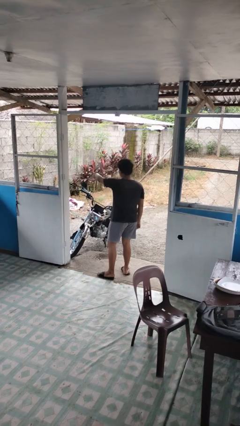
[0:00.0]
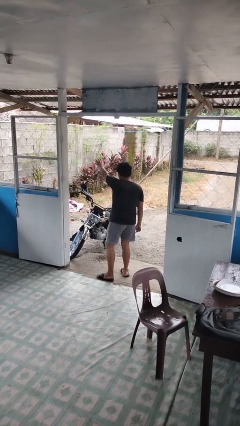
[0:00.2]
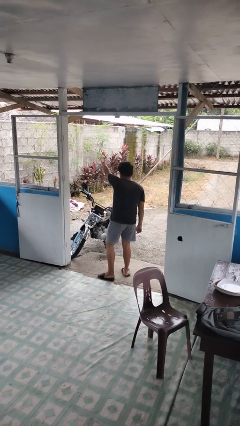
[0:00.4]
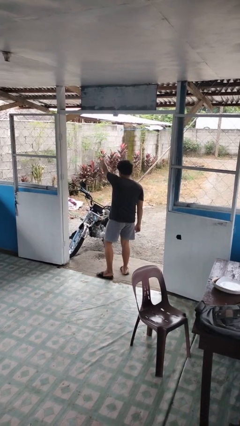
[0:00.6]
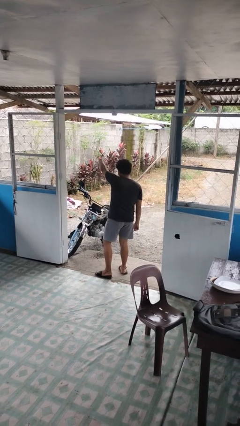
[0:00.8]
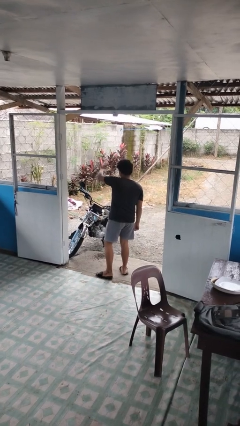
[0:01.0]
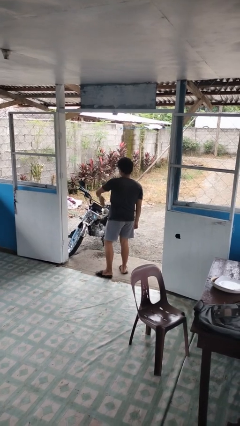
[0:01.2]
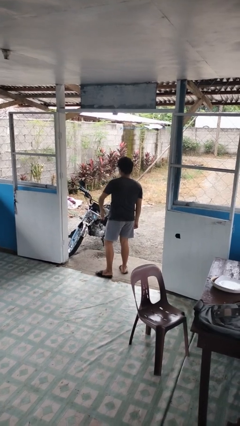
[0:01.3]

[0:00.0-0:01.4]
person gestures come here

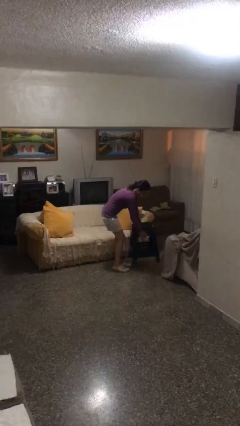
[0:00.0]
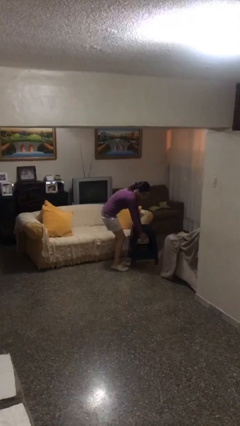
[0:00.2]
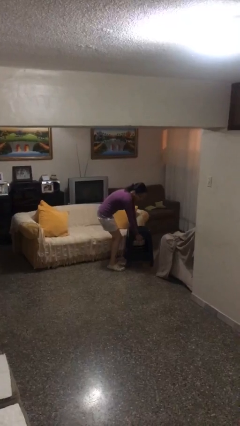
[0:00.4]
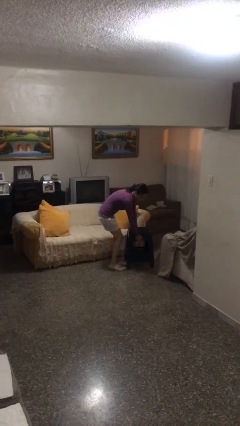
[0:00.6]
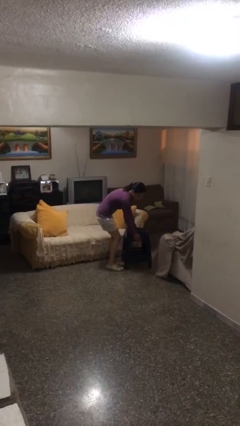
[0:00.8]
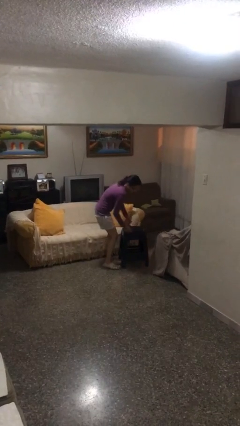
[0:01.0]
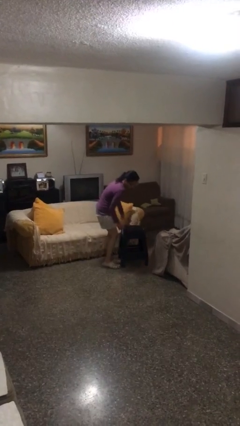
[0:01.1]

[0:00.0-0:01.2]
person puts down object on floor

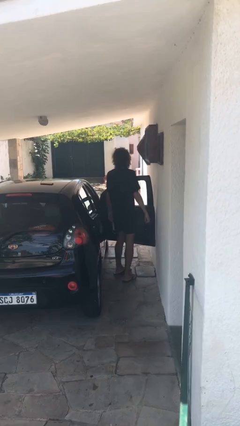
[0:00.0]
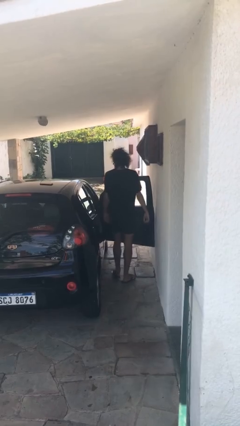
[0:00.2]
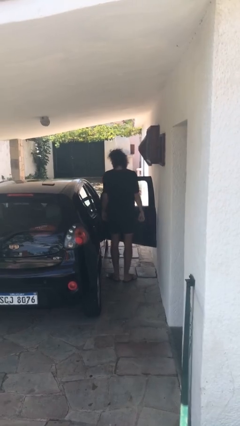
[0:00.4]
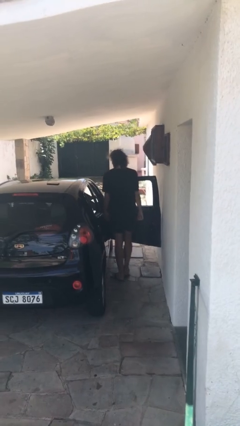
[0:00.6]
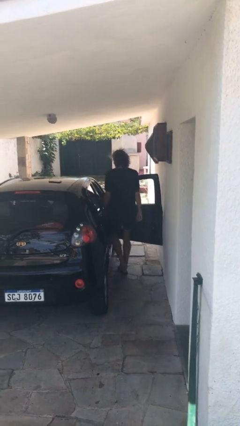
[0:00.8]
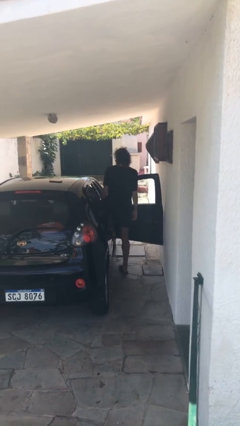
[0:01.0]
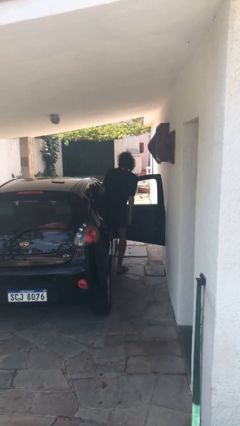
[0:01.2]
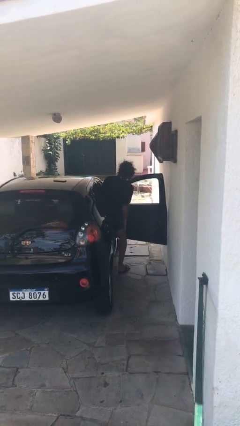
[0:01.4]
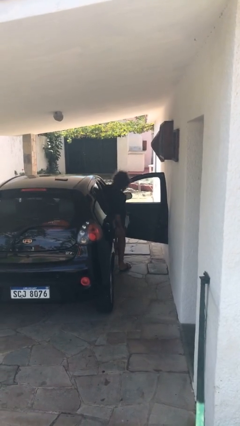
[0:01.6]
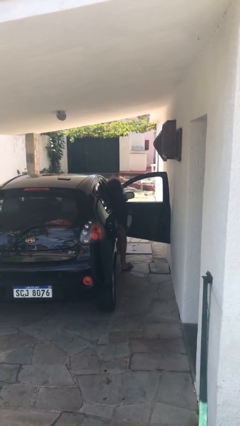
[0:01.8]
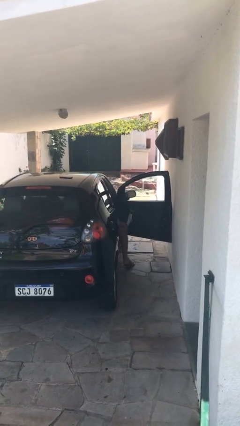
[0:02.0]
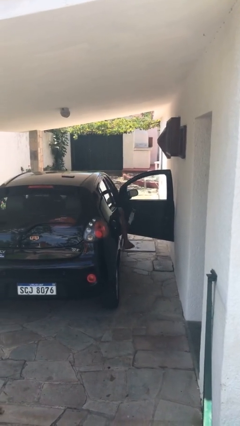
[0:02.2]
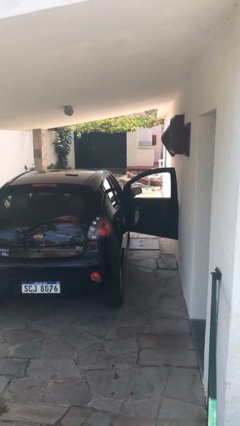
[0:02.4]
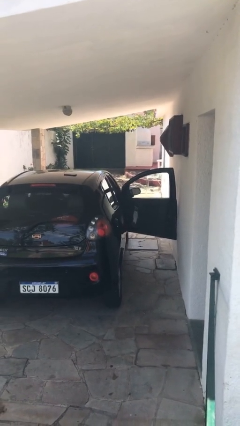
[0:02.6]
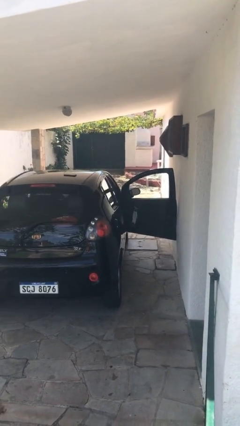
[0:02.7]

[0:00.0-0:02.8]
person enters car

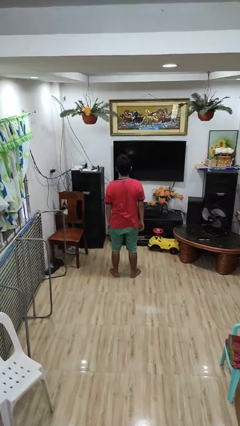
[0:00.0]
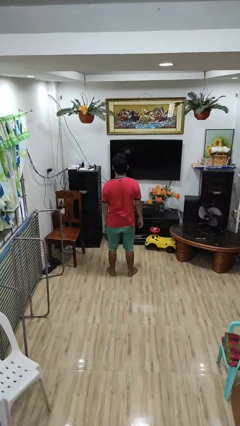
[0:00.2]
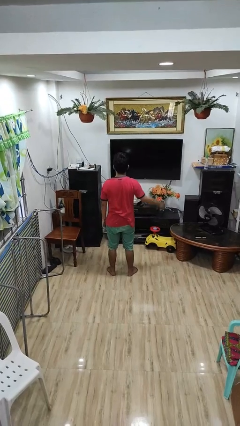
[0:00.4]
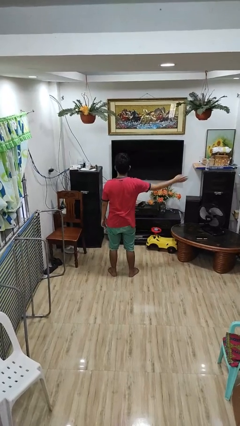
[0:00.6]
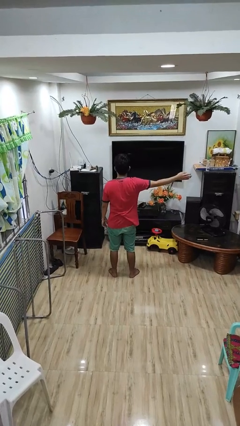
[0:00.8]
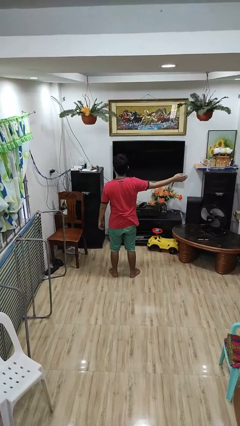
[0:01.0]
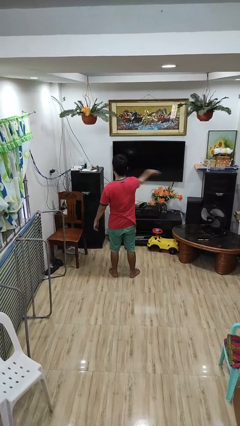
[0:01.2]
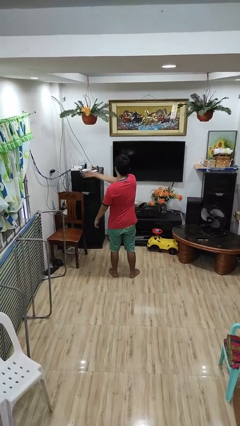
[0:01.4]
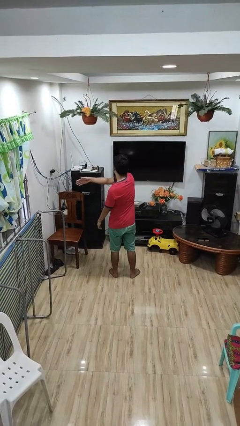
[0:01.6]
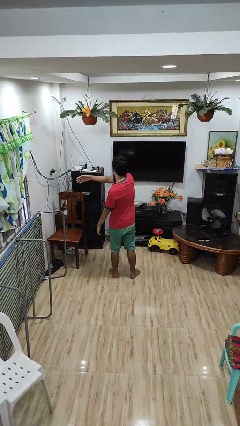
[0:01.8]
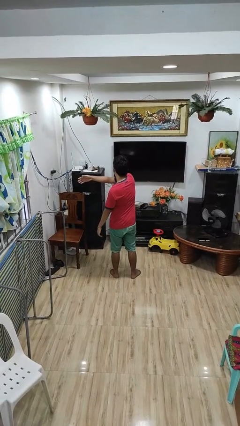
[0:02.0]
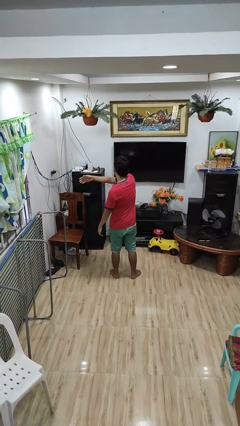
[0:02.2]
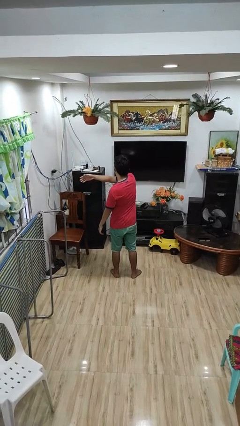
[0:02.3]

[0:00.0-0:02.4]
person gestures swipe left

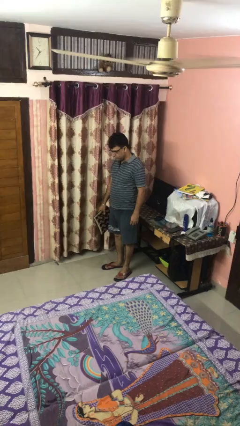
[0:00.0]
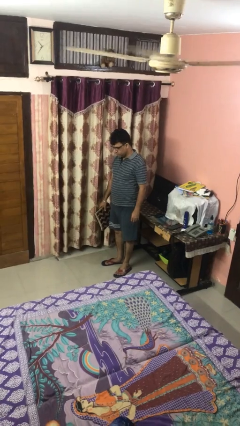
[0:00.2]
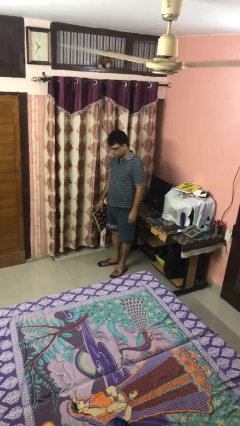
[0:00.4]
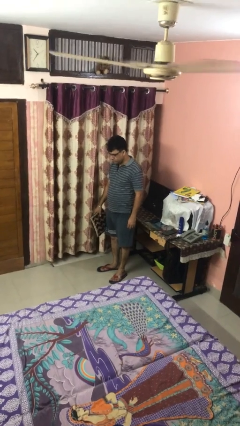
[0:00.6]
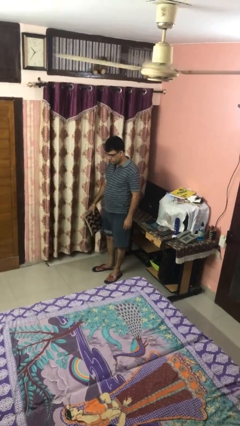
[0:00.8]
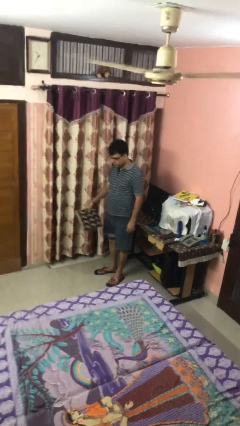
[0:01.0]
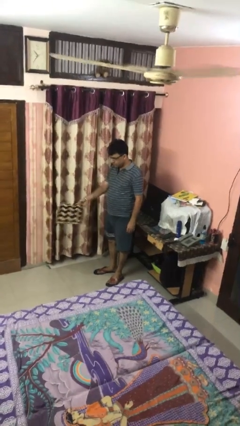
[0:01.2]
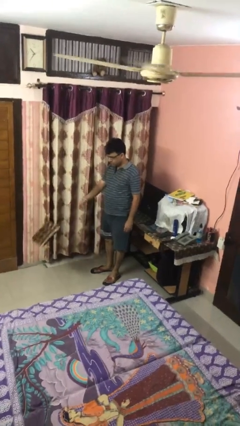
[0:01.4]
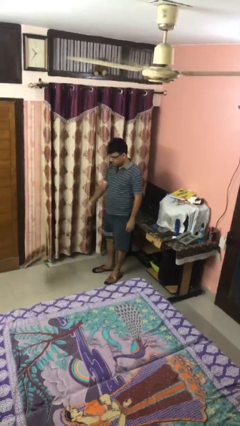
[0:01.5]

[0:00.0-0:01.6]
person throws object to ground

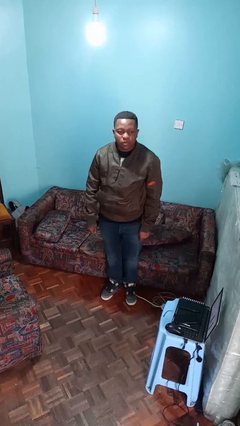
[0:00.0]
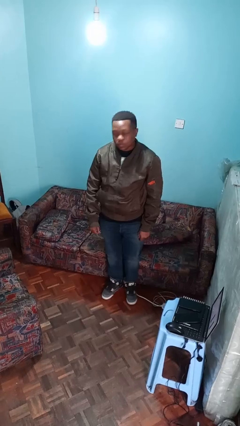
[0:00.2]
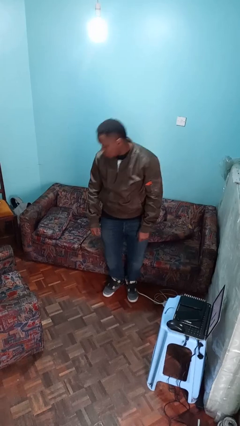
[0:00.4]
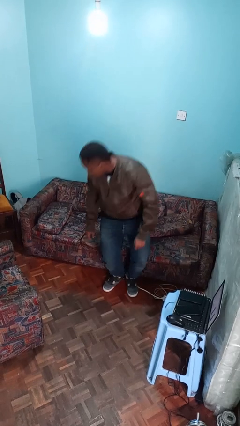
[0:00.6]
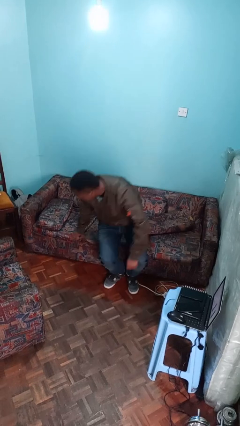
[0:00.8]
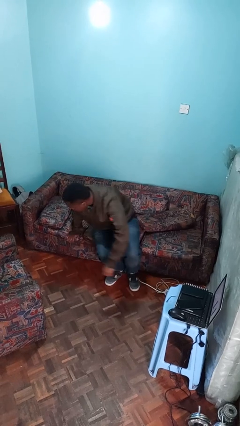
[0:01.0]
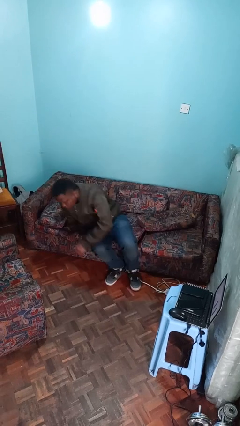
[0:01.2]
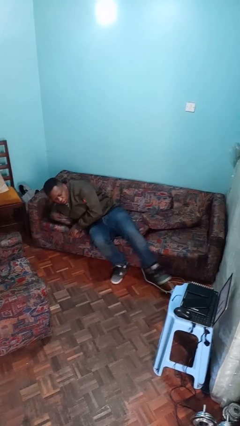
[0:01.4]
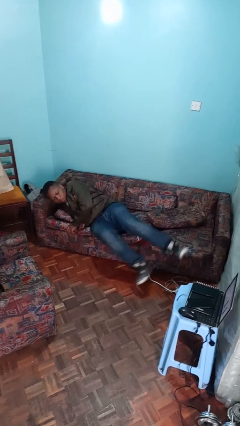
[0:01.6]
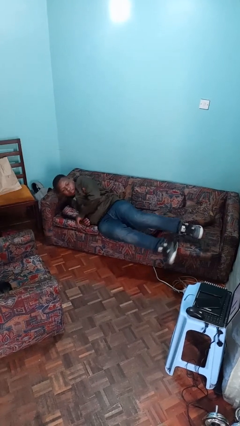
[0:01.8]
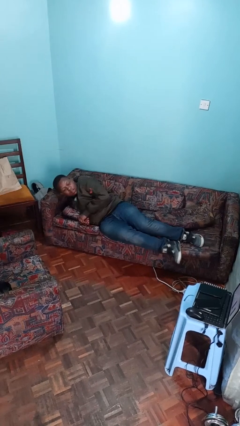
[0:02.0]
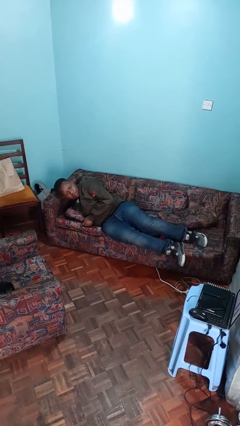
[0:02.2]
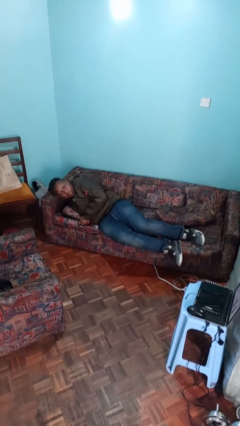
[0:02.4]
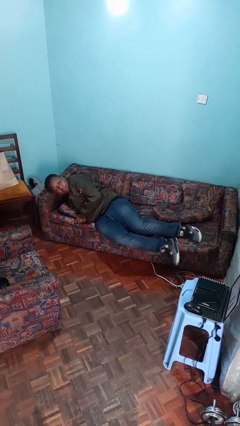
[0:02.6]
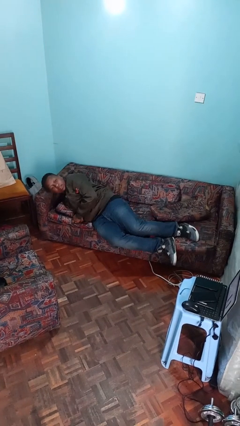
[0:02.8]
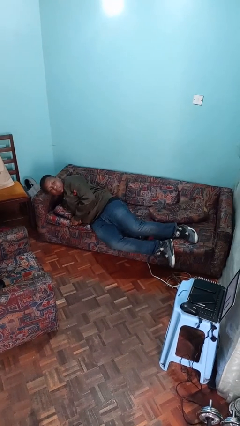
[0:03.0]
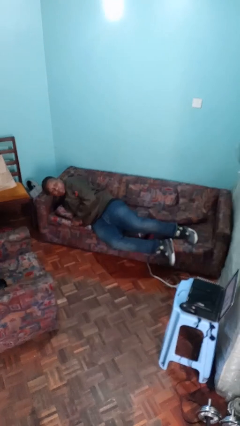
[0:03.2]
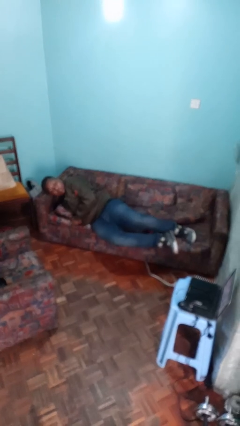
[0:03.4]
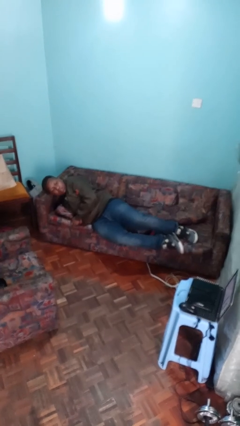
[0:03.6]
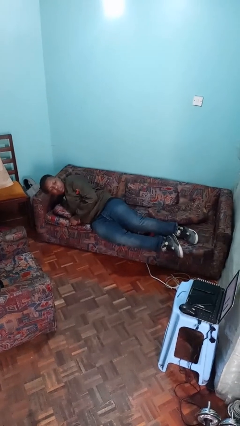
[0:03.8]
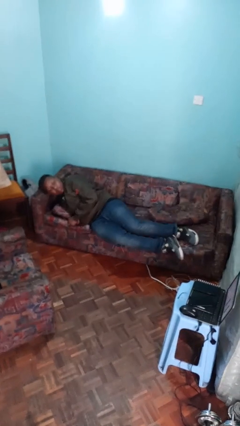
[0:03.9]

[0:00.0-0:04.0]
person lies down on couch

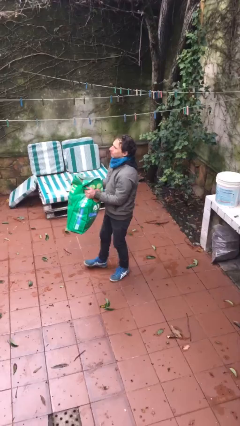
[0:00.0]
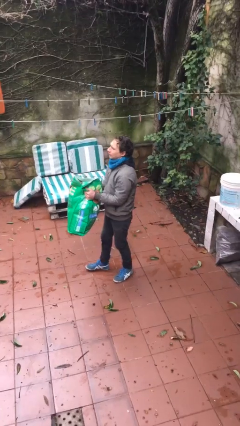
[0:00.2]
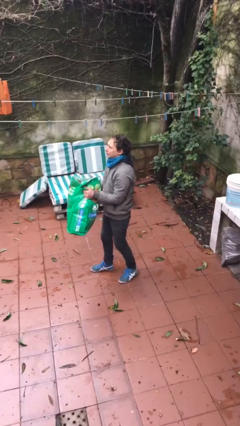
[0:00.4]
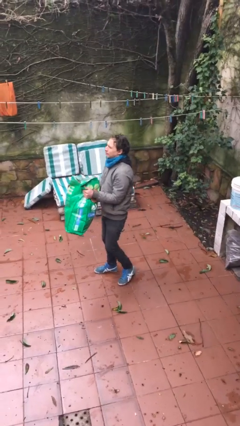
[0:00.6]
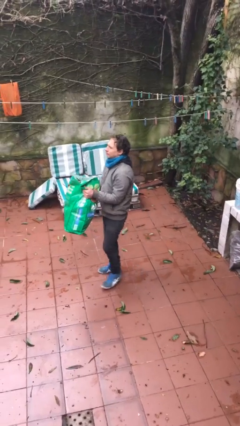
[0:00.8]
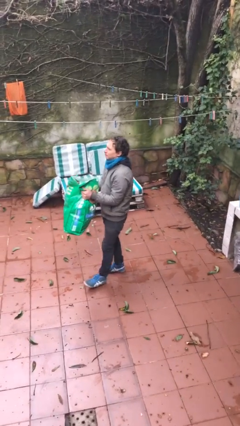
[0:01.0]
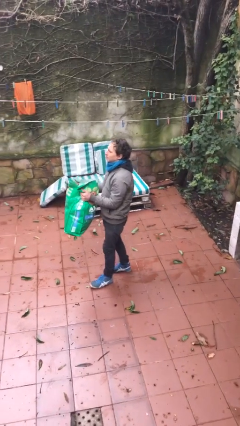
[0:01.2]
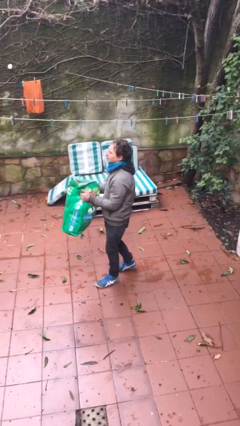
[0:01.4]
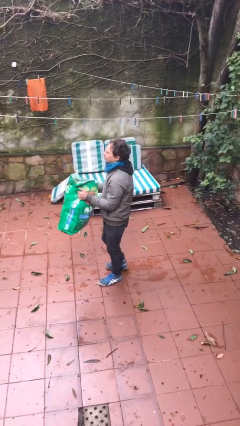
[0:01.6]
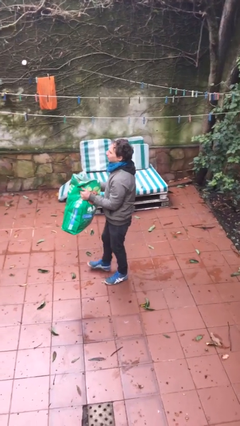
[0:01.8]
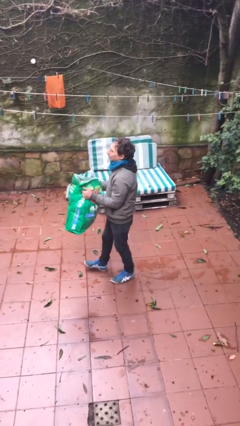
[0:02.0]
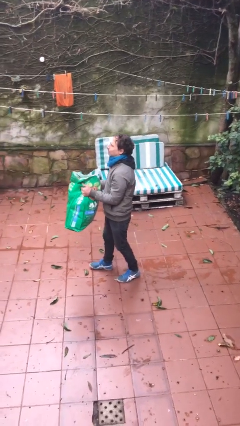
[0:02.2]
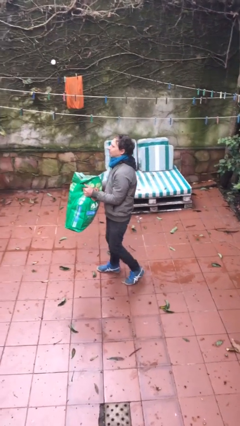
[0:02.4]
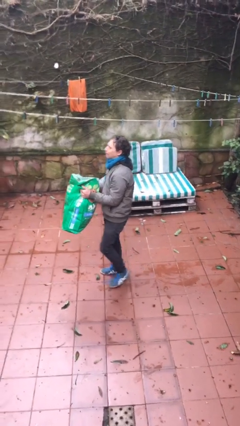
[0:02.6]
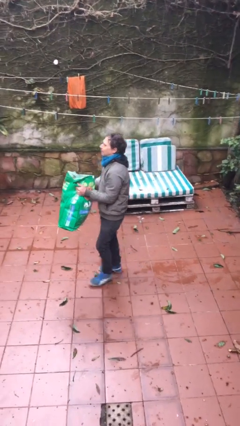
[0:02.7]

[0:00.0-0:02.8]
person carries heavy object

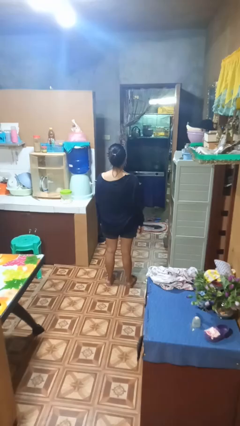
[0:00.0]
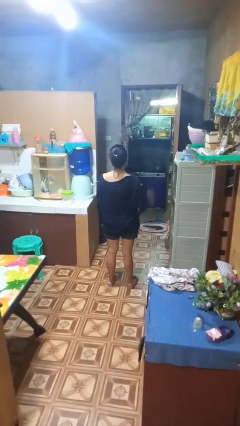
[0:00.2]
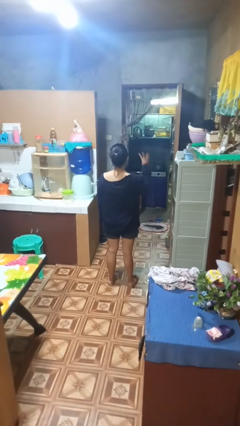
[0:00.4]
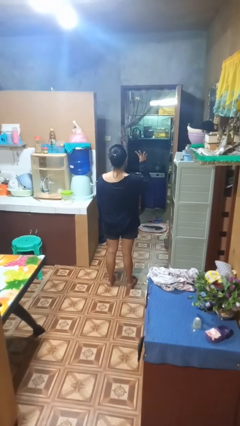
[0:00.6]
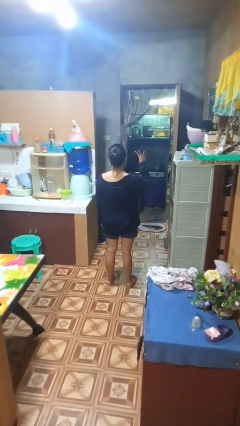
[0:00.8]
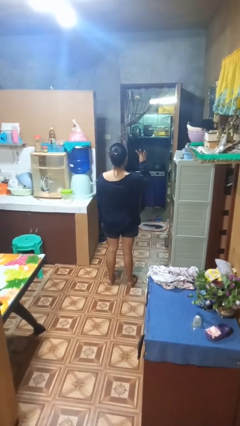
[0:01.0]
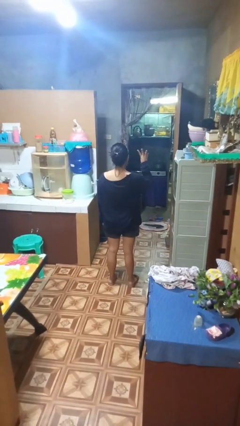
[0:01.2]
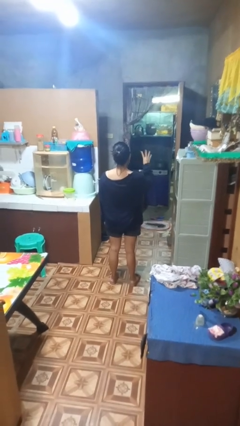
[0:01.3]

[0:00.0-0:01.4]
person gestures number four
